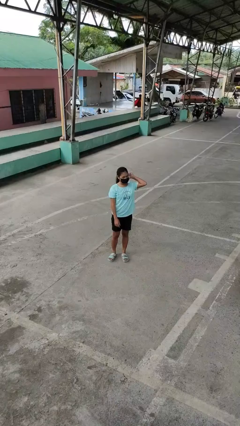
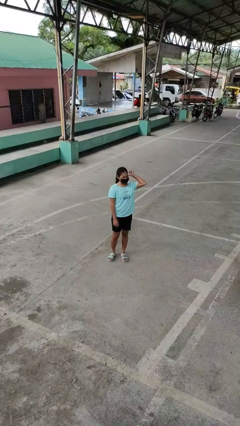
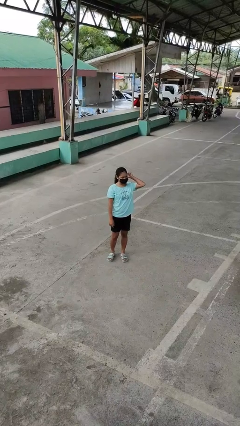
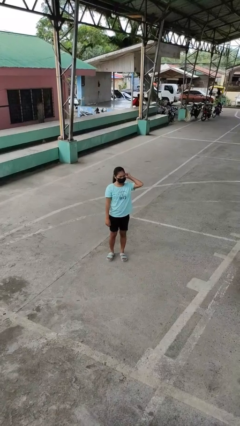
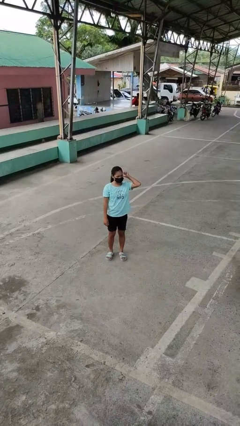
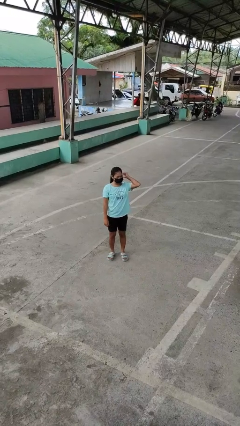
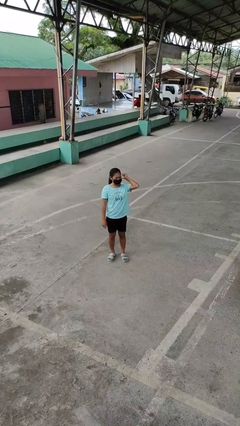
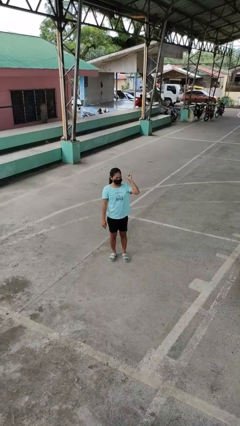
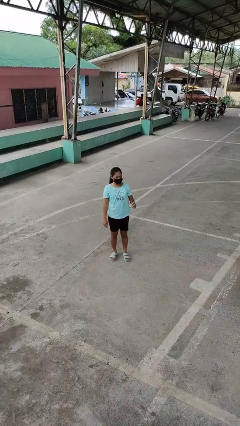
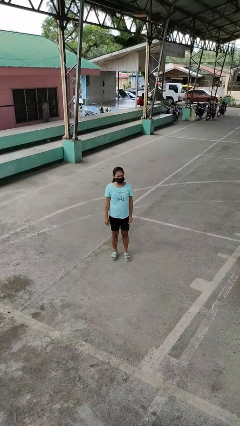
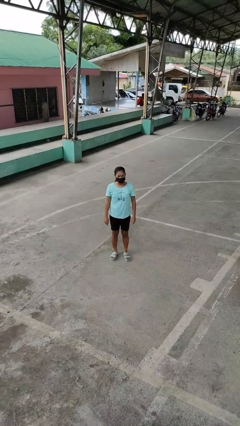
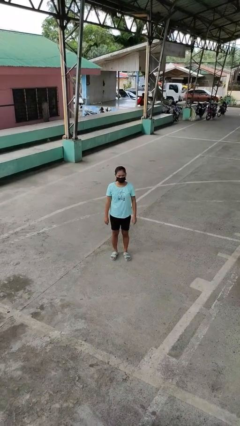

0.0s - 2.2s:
person gestures behind me

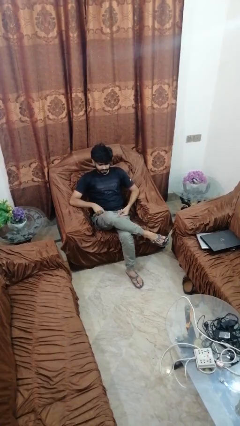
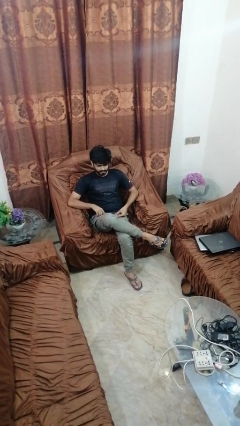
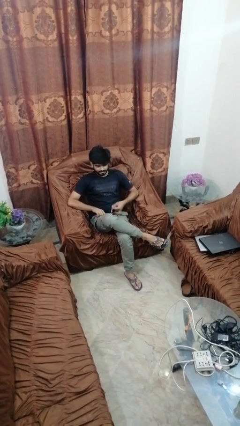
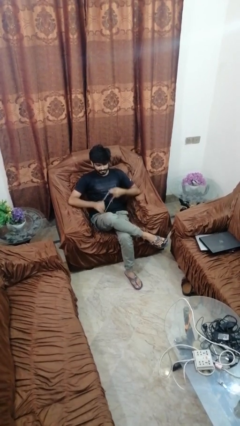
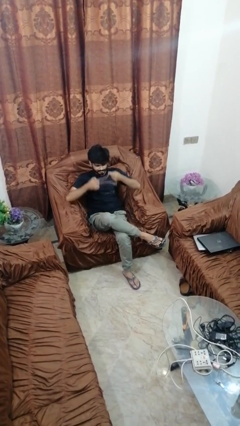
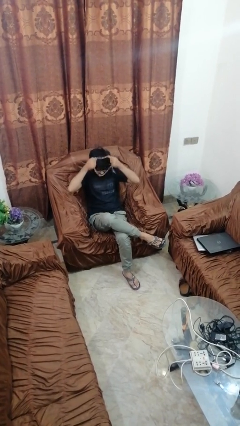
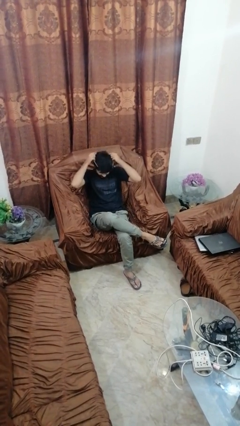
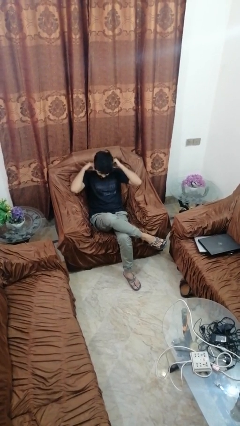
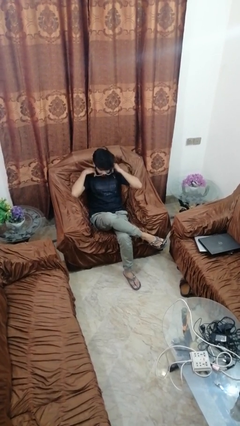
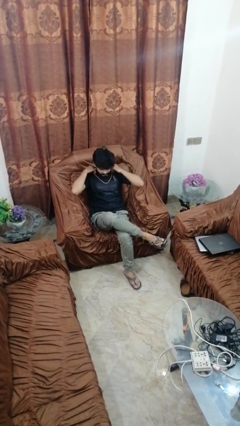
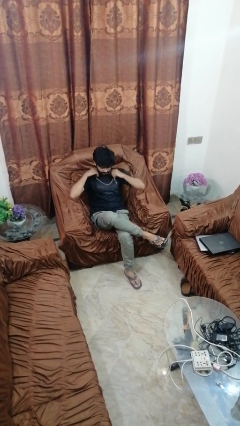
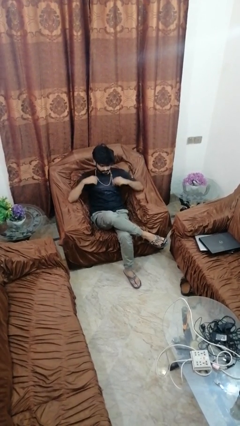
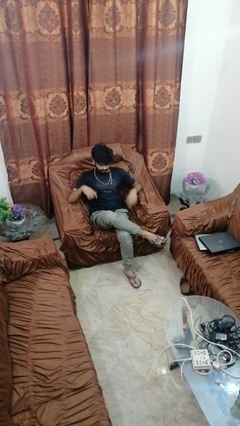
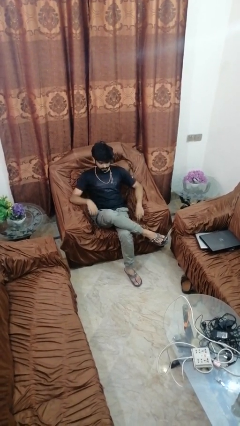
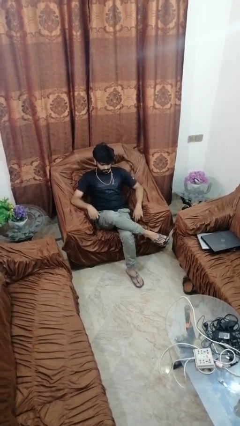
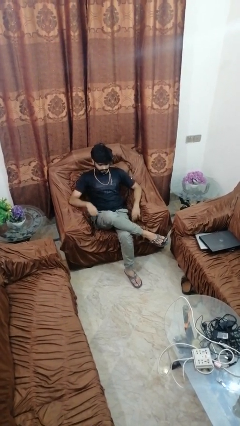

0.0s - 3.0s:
person puts on necklace

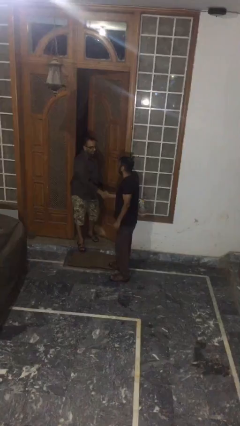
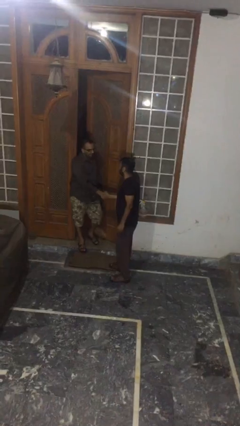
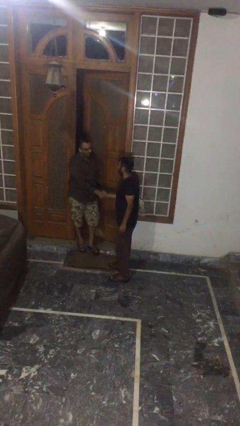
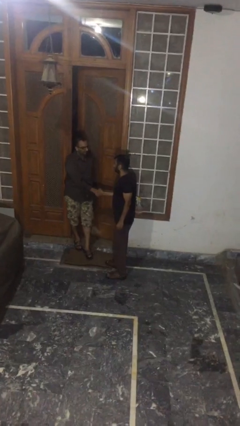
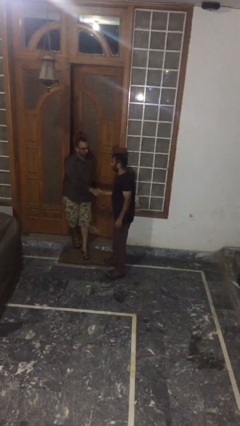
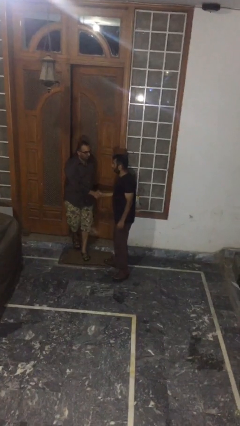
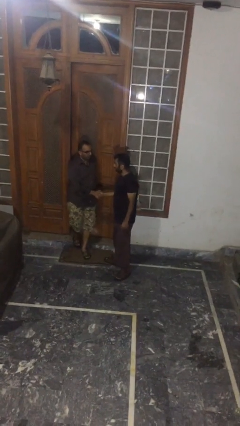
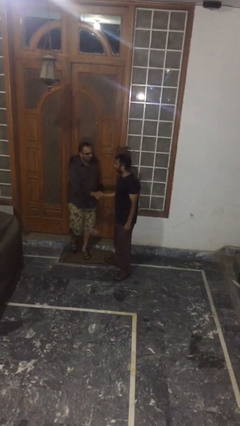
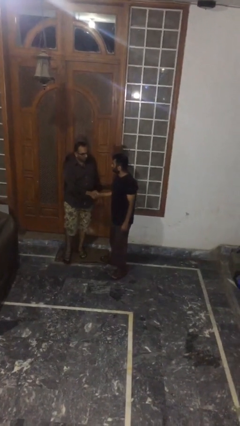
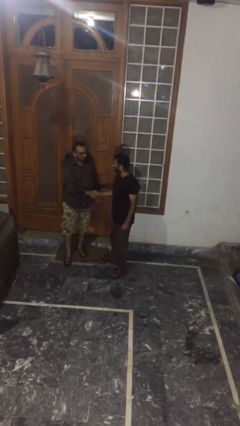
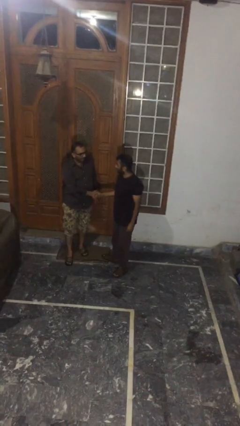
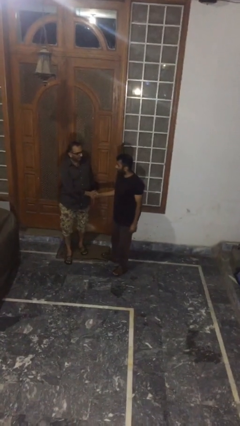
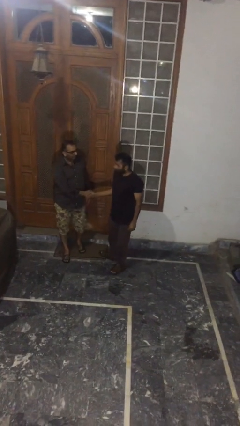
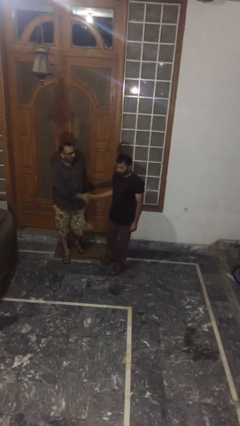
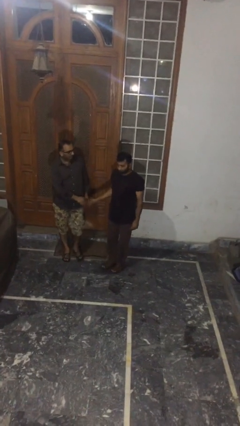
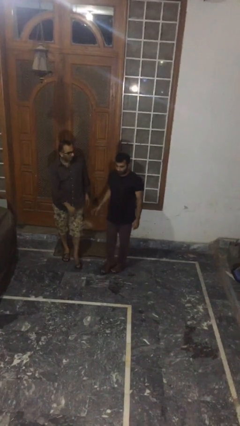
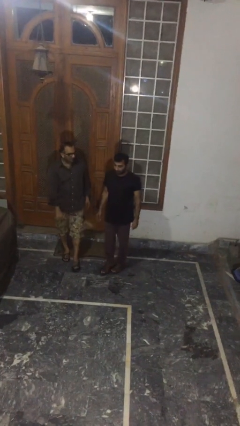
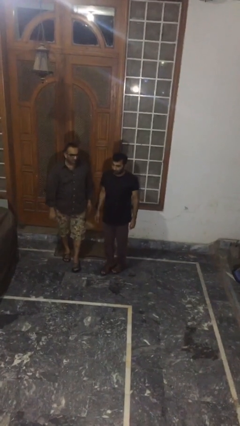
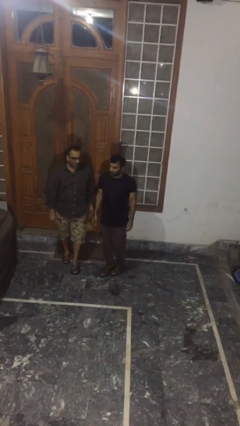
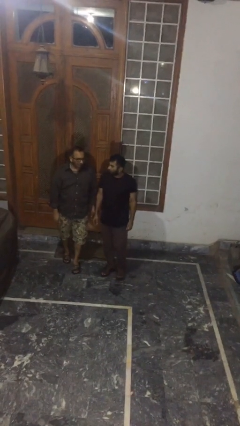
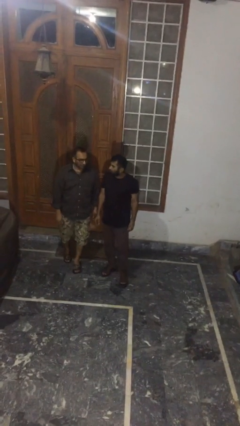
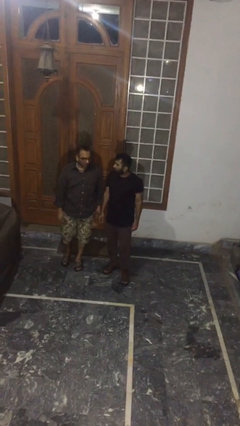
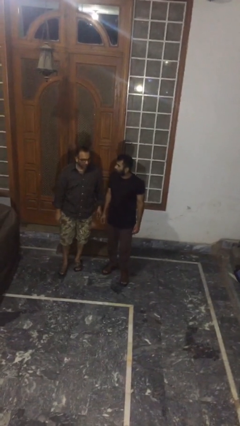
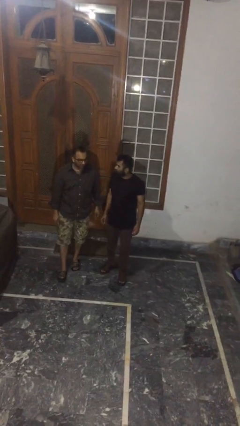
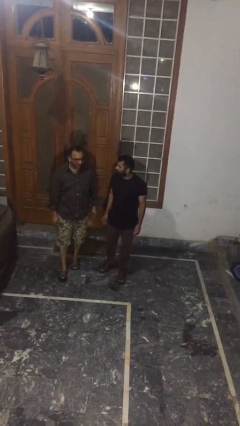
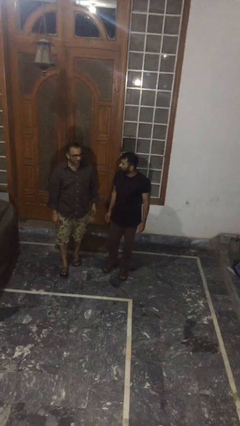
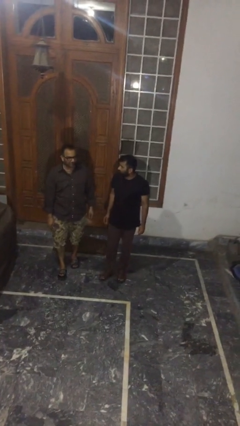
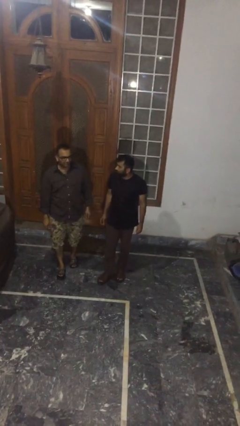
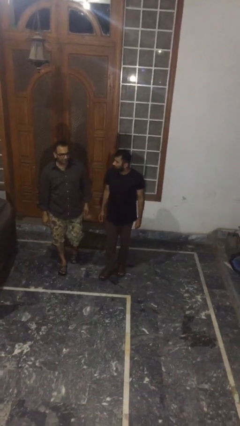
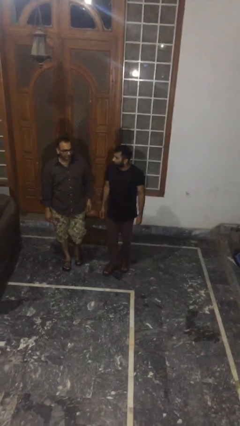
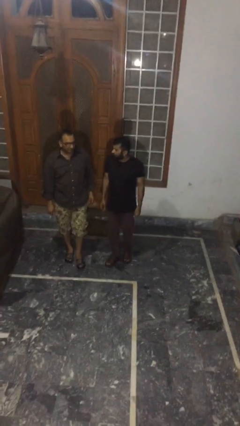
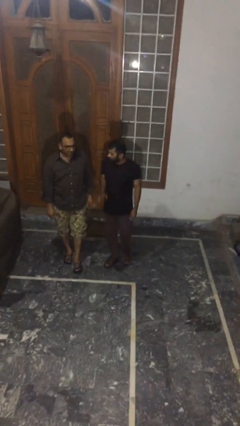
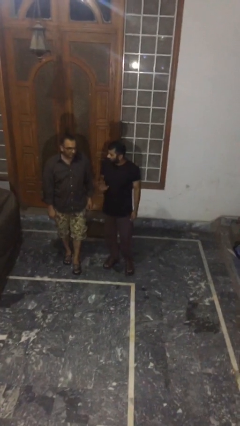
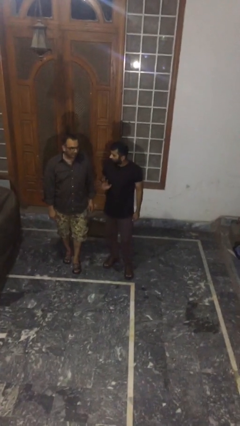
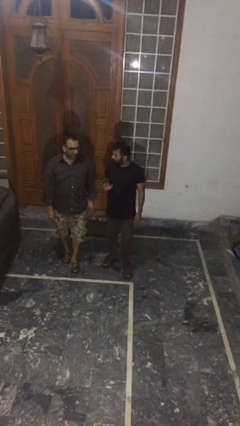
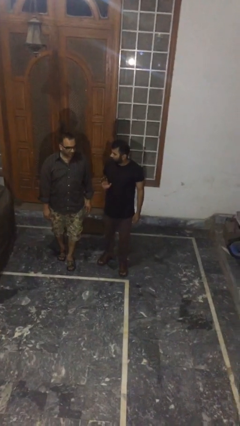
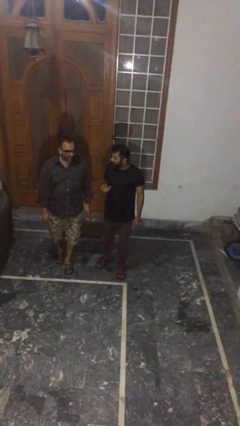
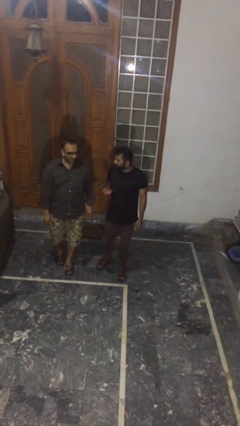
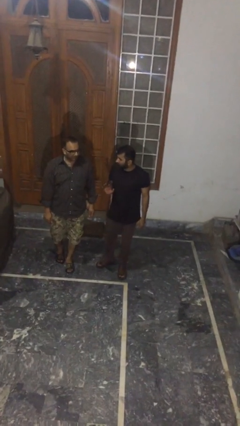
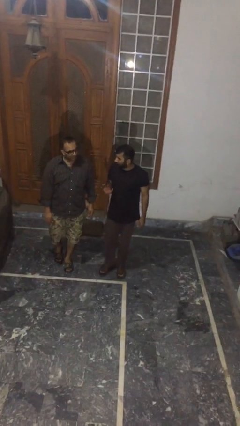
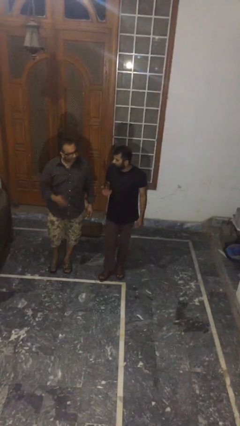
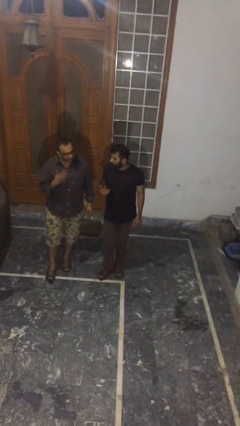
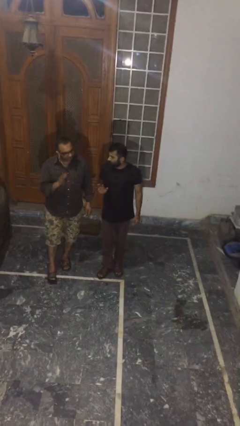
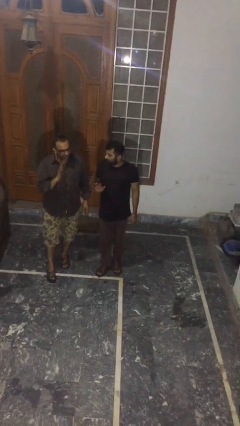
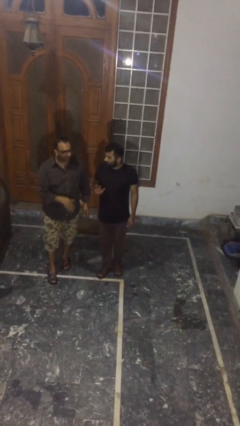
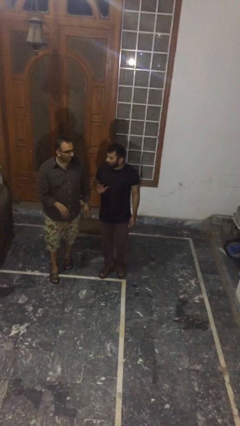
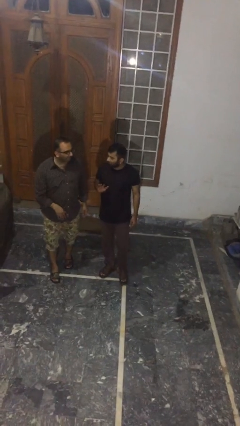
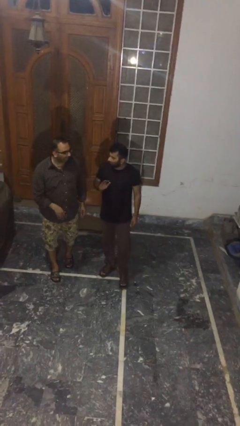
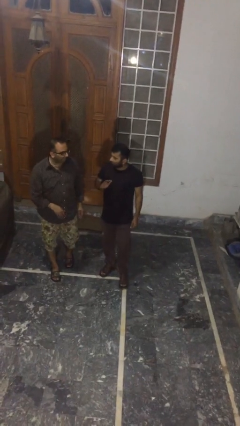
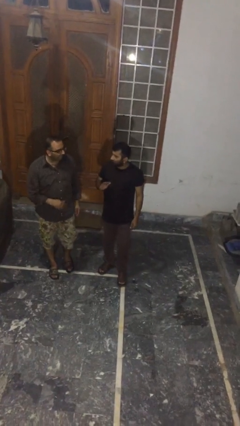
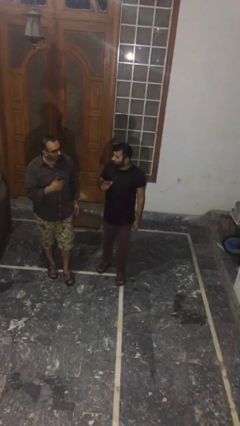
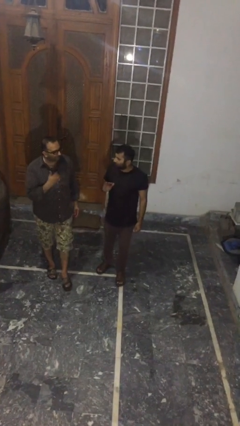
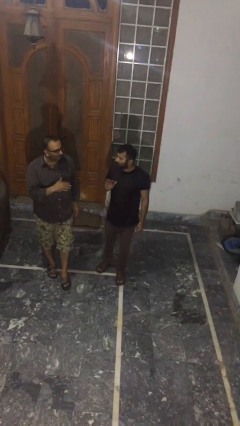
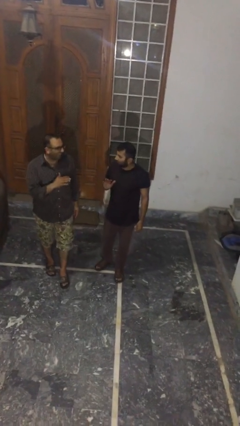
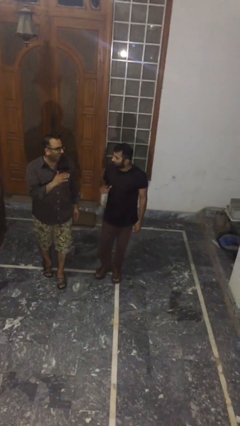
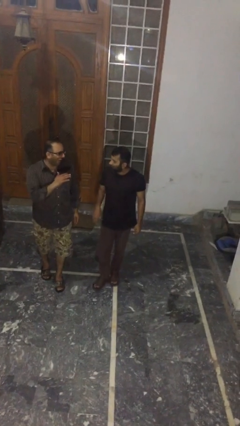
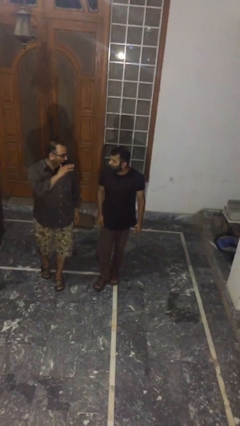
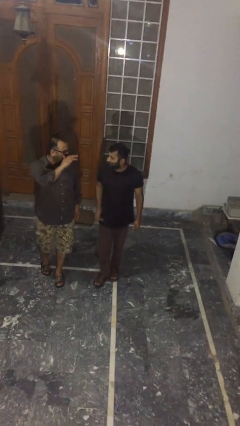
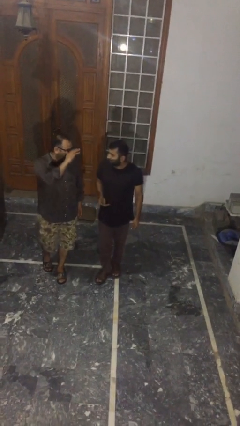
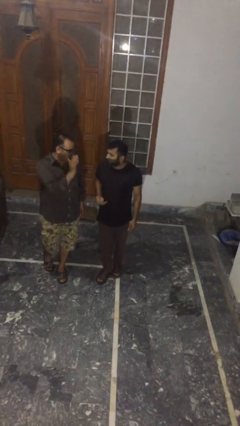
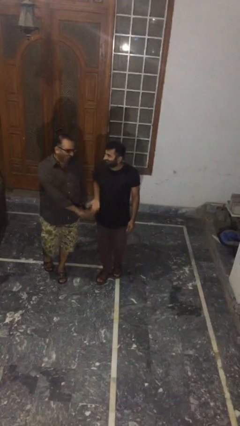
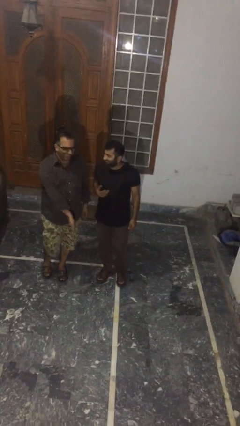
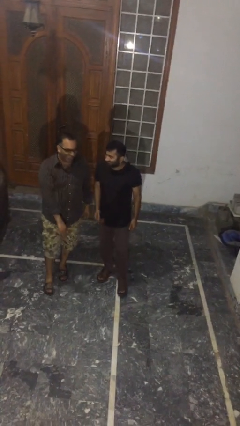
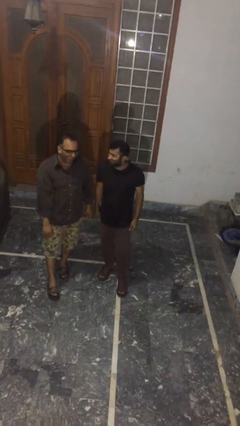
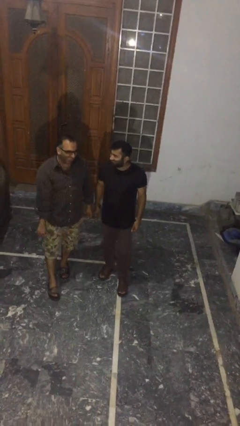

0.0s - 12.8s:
person talks to person

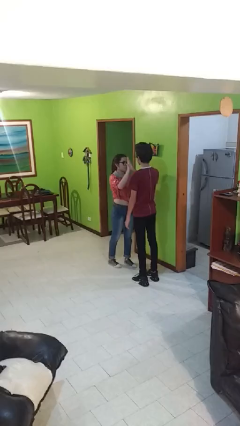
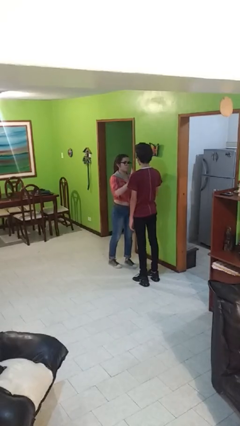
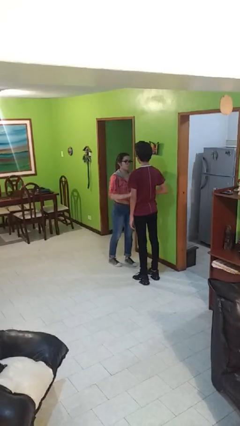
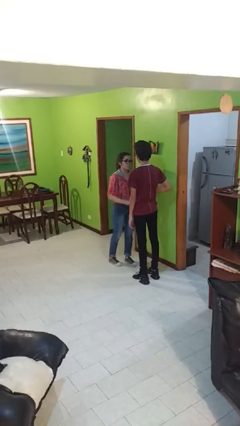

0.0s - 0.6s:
person highfives hand
